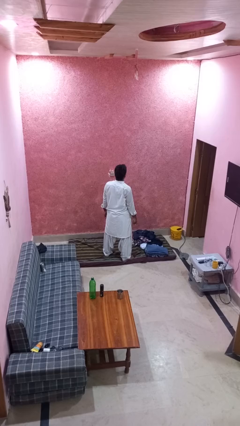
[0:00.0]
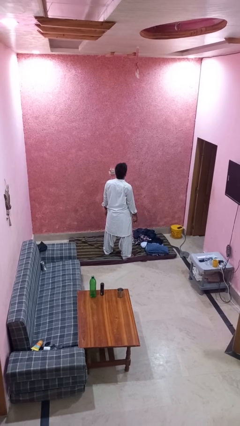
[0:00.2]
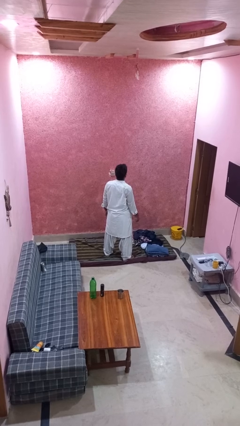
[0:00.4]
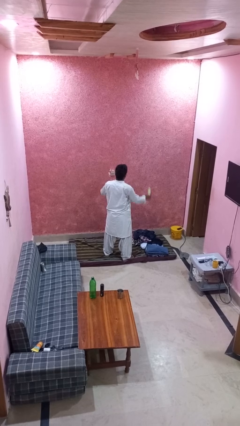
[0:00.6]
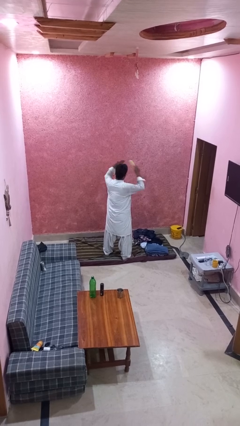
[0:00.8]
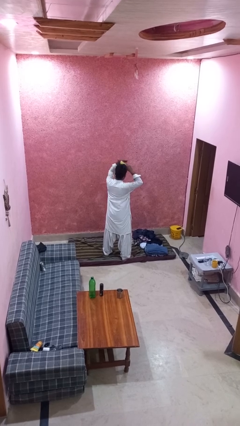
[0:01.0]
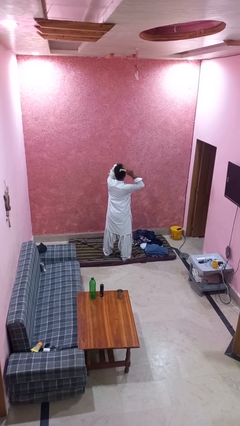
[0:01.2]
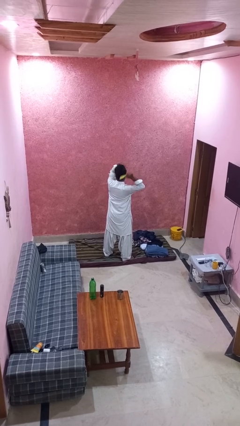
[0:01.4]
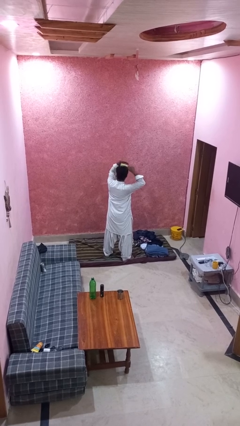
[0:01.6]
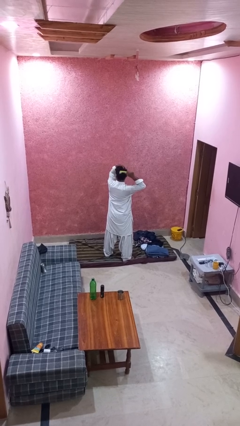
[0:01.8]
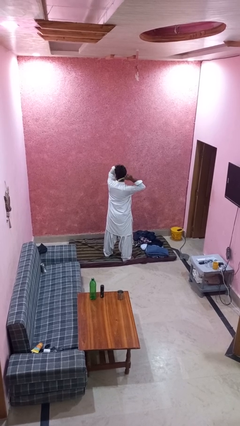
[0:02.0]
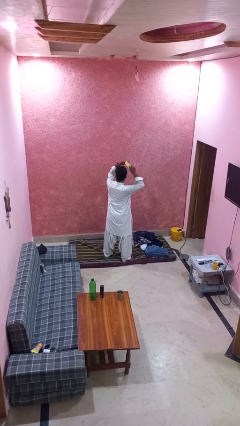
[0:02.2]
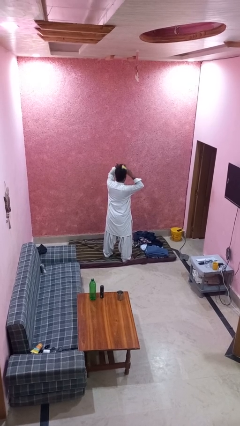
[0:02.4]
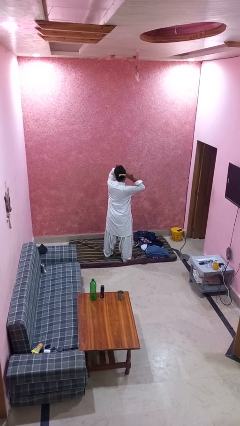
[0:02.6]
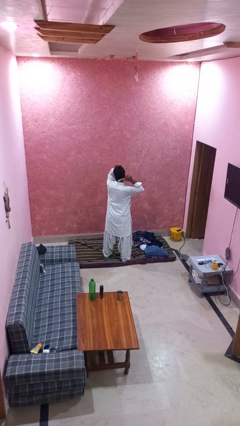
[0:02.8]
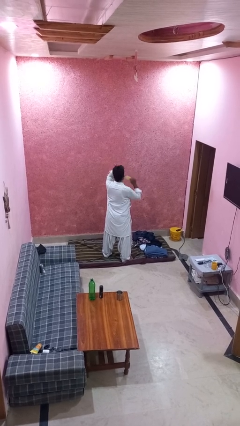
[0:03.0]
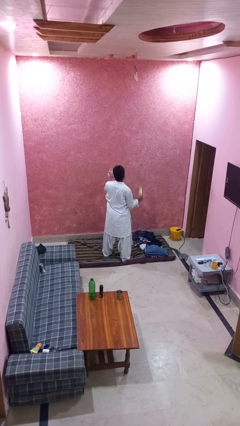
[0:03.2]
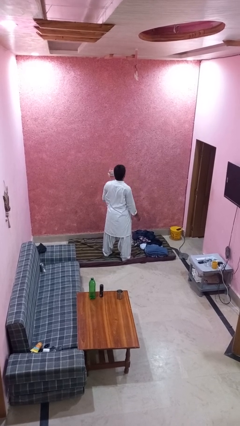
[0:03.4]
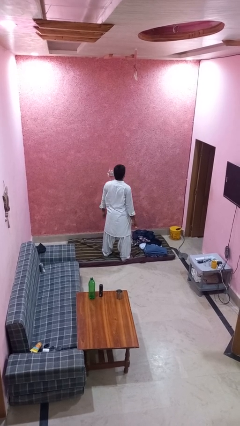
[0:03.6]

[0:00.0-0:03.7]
person brushes hair

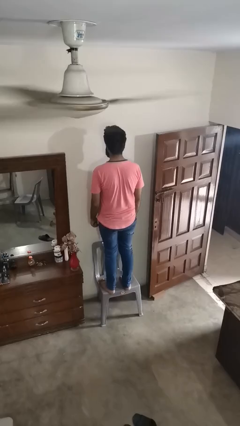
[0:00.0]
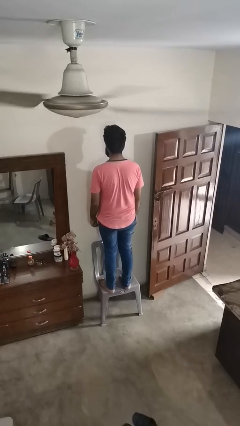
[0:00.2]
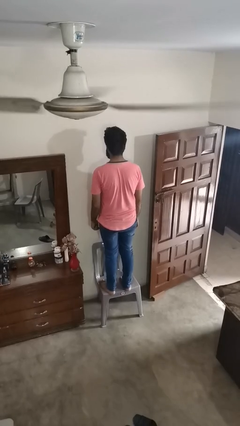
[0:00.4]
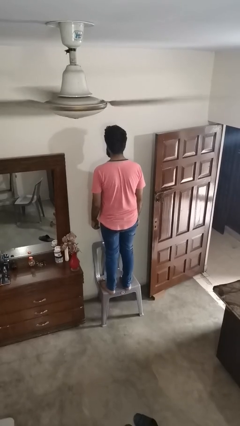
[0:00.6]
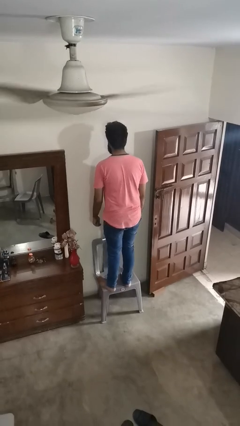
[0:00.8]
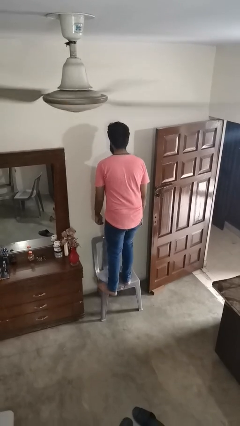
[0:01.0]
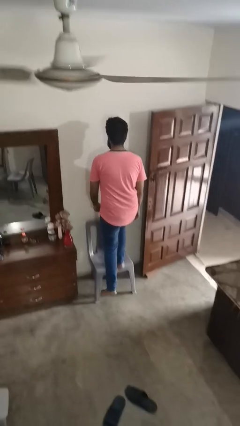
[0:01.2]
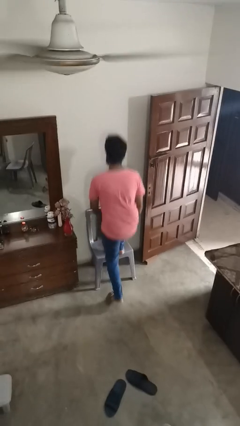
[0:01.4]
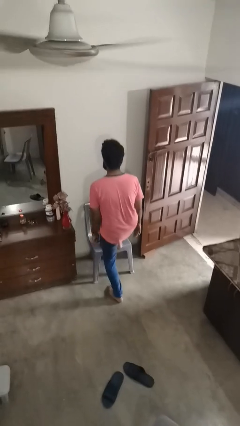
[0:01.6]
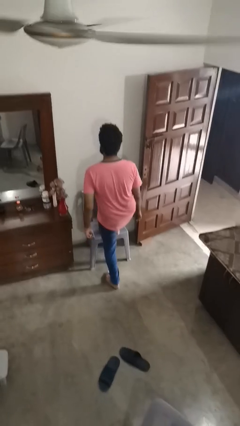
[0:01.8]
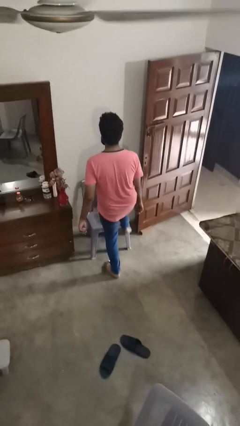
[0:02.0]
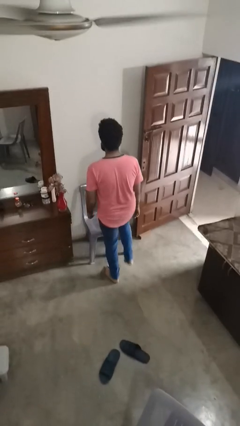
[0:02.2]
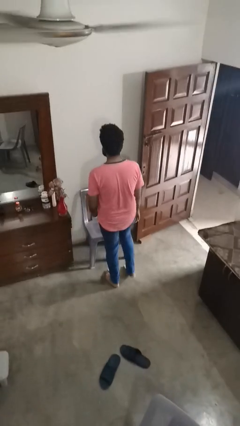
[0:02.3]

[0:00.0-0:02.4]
person climbs off chair

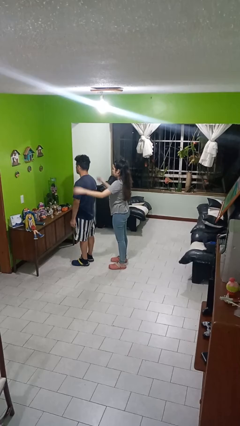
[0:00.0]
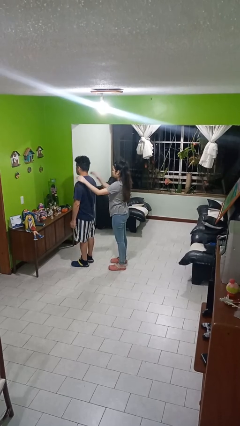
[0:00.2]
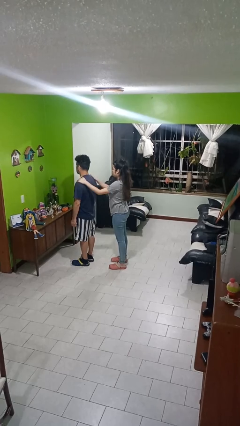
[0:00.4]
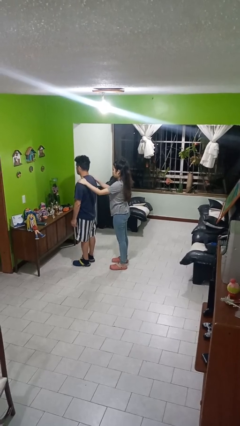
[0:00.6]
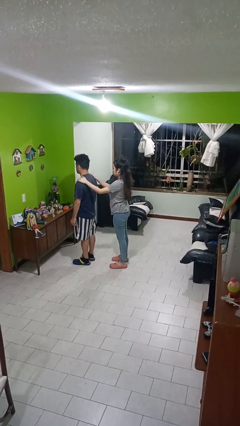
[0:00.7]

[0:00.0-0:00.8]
person grabs person by shoulder

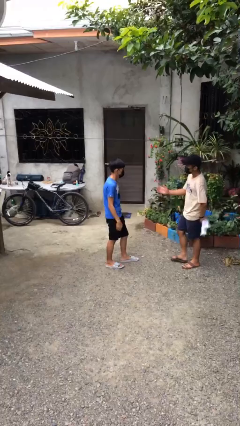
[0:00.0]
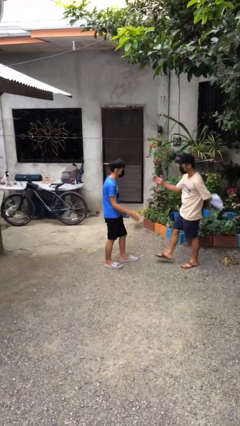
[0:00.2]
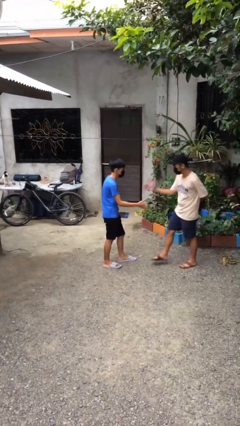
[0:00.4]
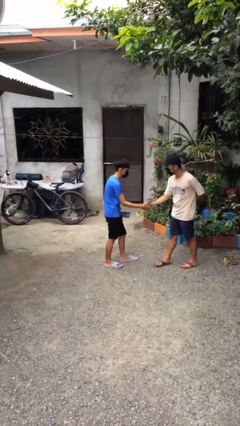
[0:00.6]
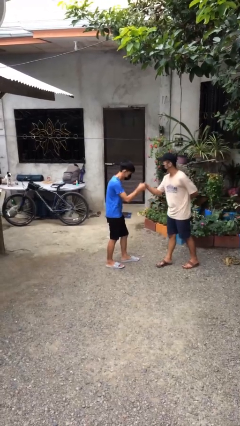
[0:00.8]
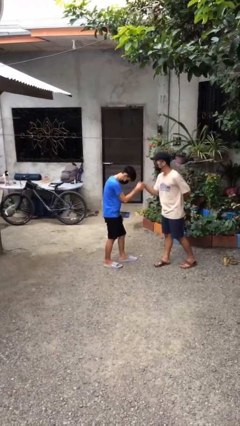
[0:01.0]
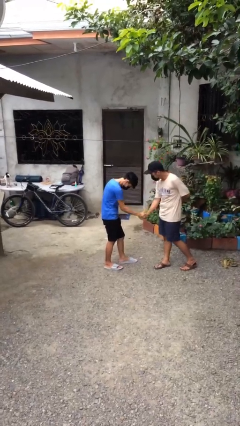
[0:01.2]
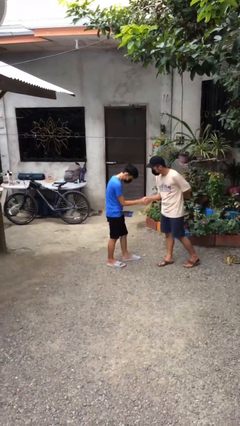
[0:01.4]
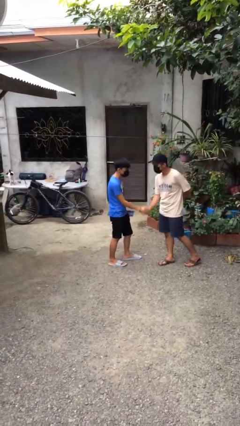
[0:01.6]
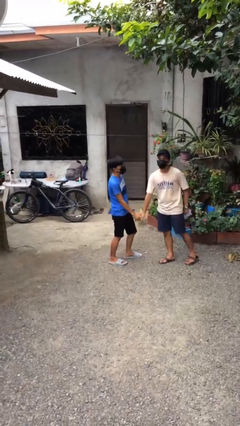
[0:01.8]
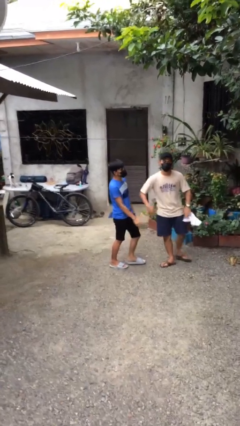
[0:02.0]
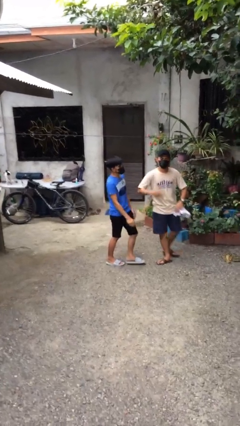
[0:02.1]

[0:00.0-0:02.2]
person shakes hand

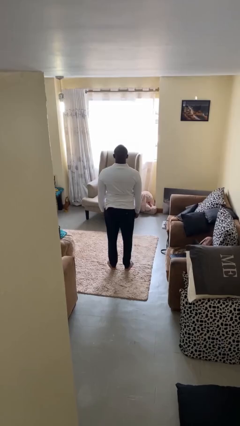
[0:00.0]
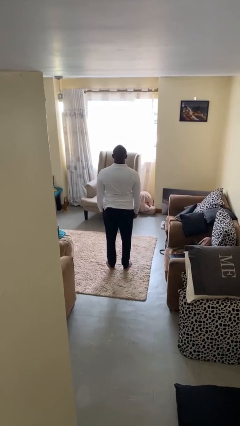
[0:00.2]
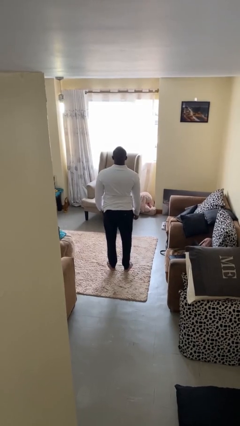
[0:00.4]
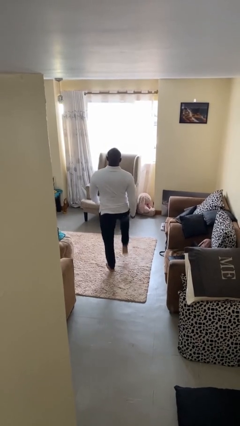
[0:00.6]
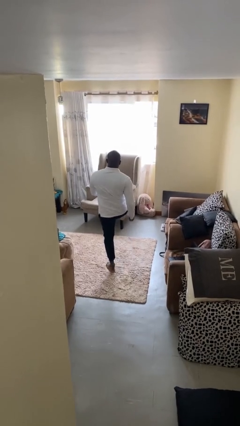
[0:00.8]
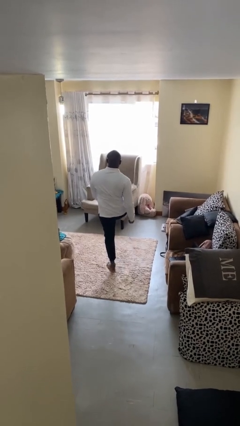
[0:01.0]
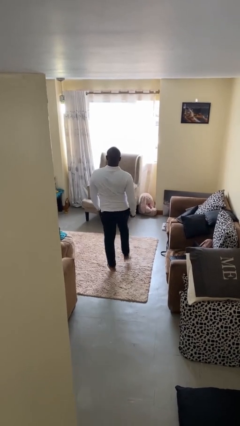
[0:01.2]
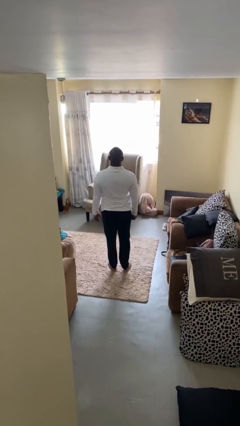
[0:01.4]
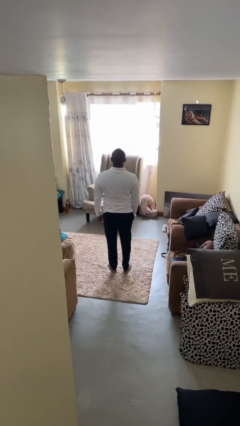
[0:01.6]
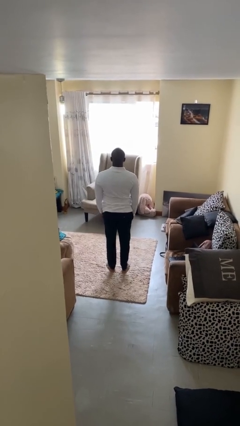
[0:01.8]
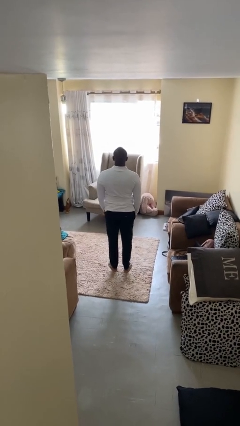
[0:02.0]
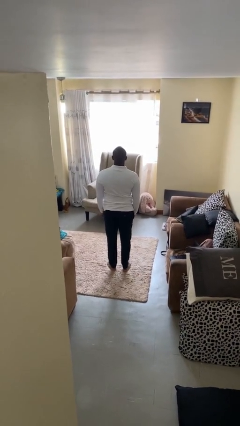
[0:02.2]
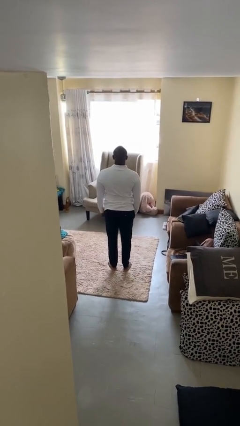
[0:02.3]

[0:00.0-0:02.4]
person karate kicks

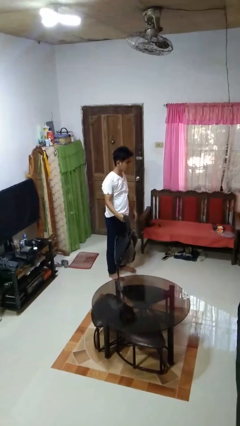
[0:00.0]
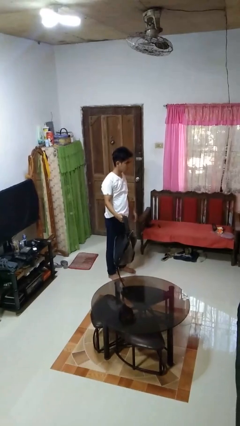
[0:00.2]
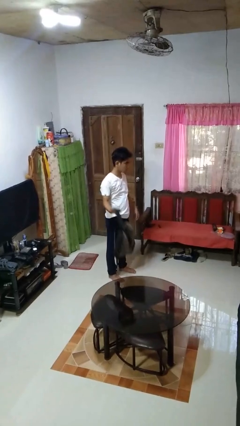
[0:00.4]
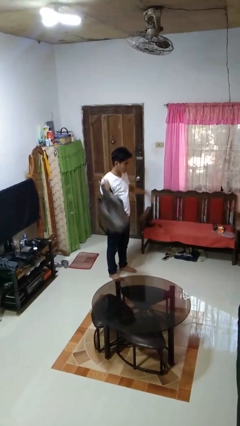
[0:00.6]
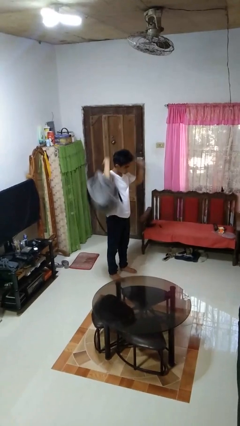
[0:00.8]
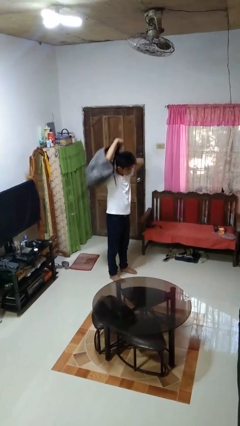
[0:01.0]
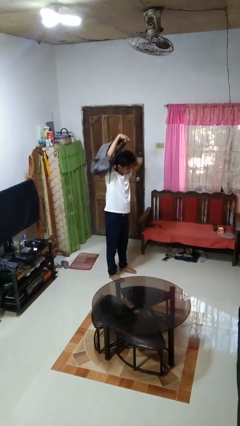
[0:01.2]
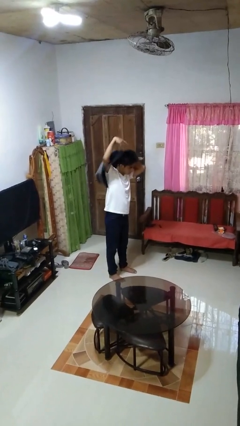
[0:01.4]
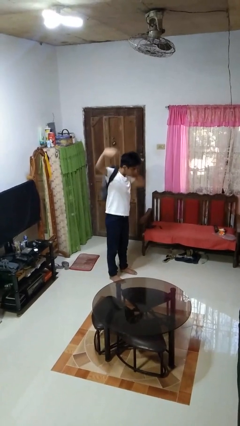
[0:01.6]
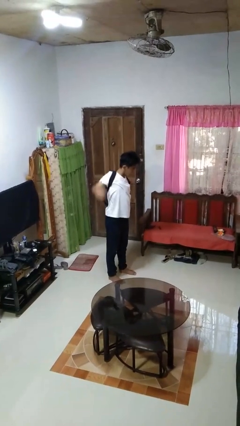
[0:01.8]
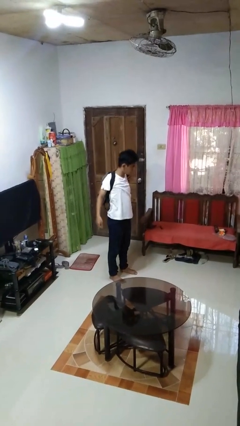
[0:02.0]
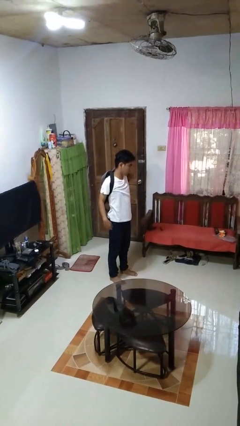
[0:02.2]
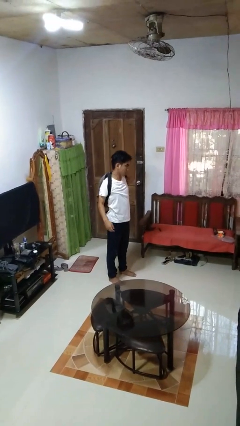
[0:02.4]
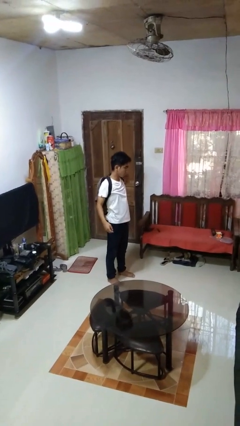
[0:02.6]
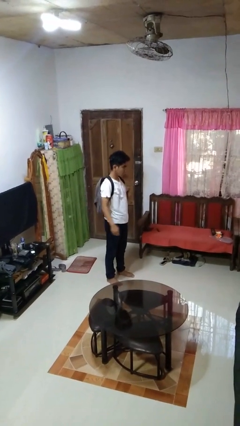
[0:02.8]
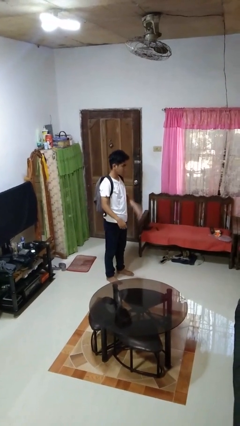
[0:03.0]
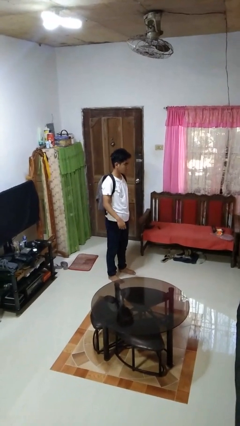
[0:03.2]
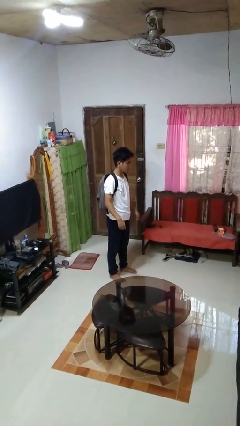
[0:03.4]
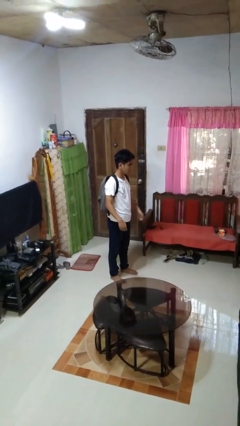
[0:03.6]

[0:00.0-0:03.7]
person puts on backpack

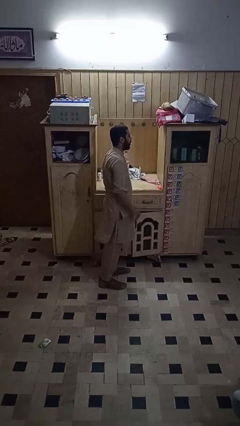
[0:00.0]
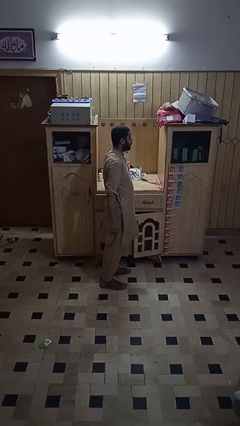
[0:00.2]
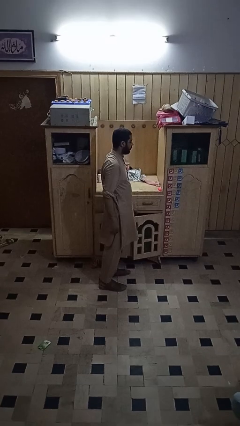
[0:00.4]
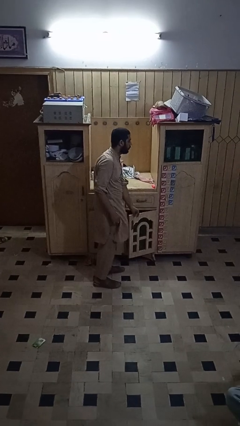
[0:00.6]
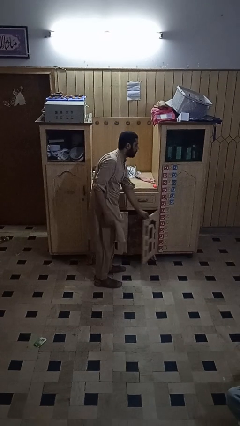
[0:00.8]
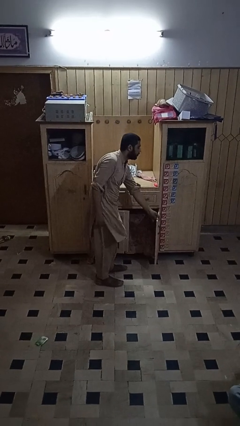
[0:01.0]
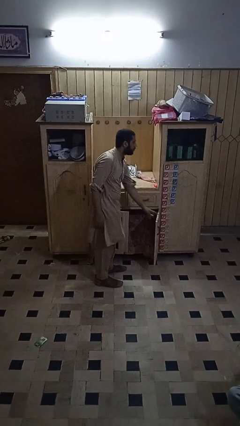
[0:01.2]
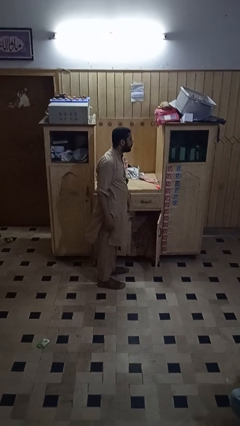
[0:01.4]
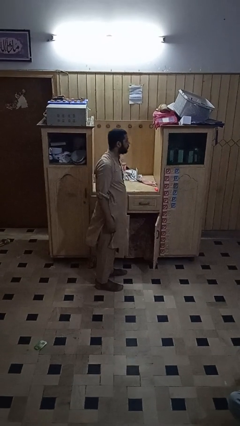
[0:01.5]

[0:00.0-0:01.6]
person closes cabinet
